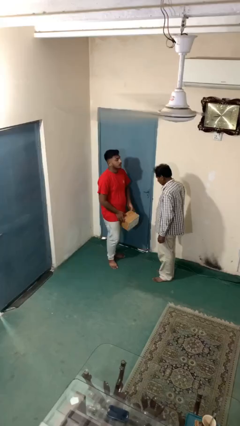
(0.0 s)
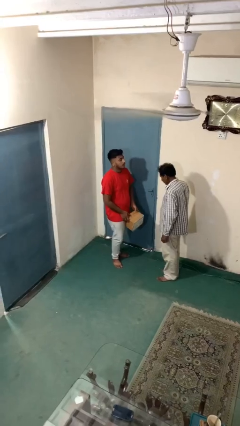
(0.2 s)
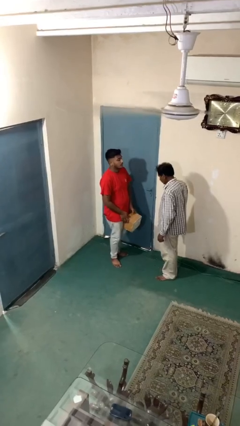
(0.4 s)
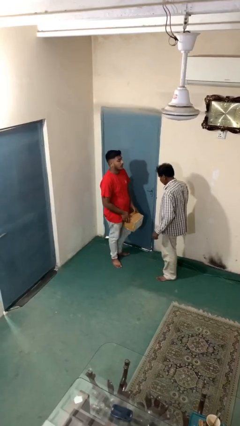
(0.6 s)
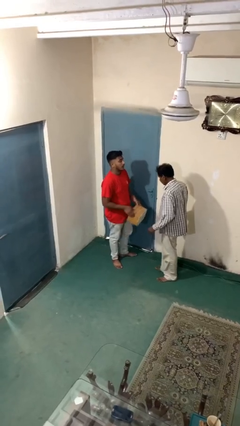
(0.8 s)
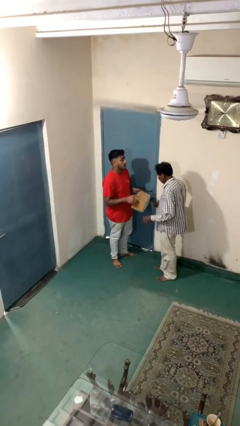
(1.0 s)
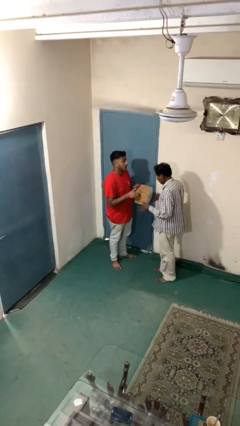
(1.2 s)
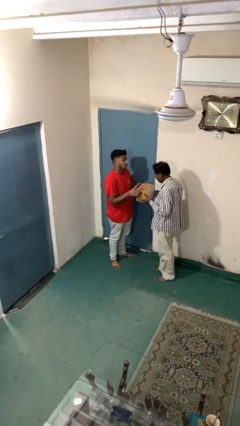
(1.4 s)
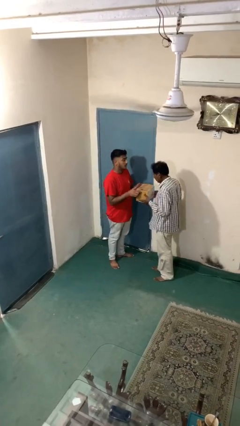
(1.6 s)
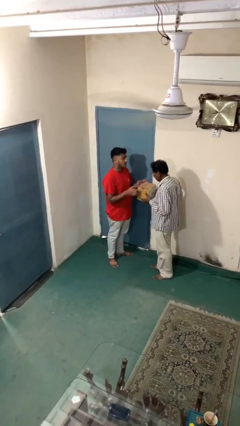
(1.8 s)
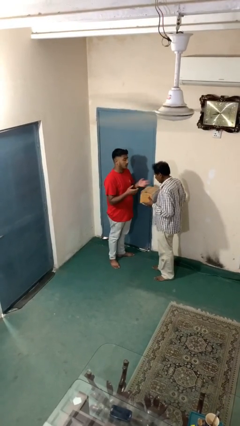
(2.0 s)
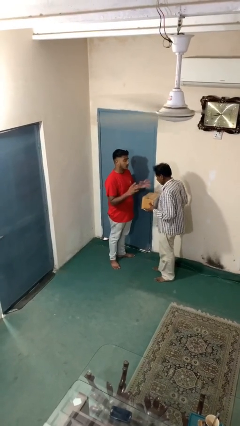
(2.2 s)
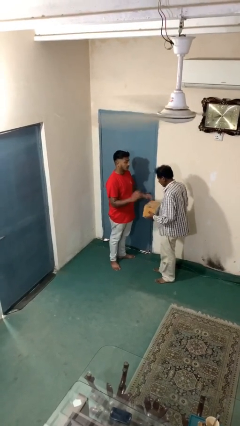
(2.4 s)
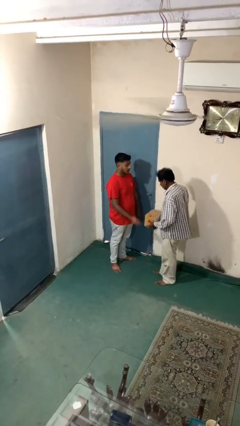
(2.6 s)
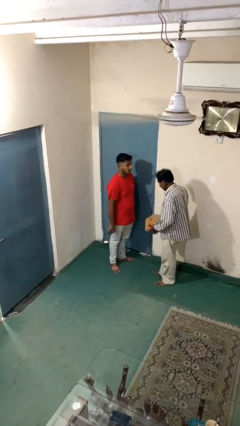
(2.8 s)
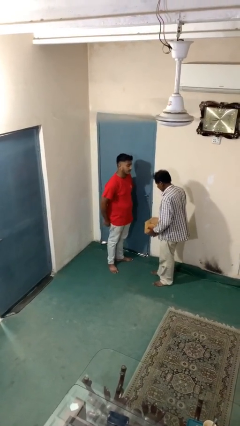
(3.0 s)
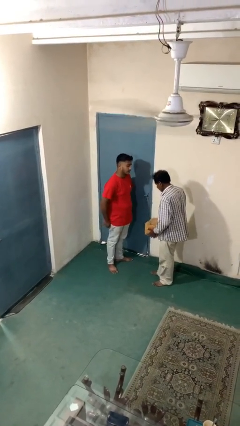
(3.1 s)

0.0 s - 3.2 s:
person transfers object to person

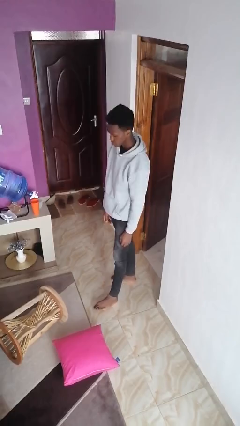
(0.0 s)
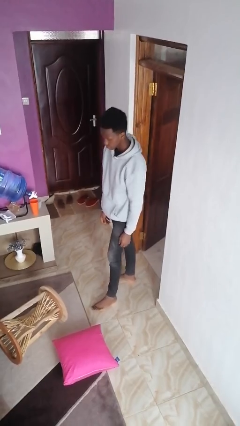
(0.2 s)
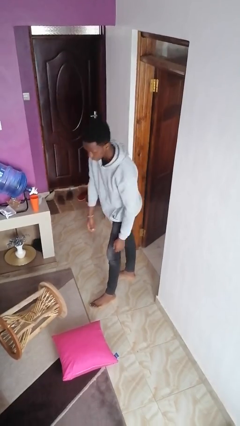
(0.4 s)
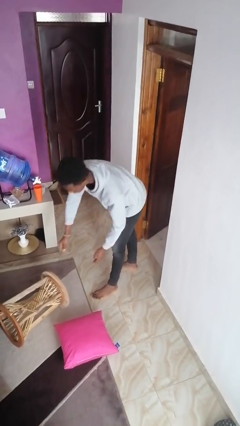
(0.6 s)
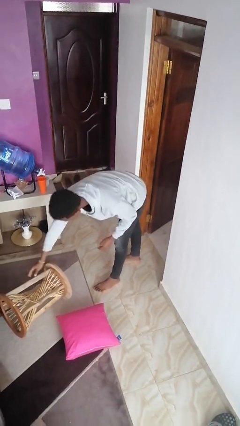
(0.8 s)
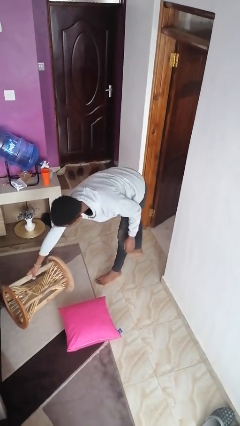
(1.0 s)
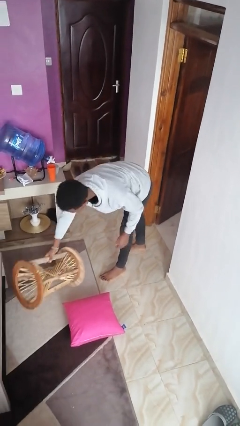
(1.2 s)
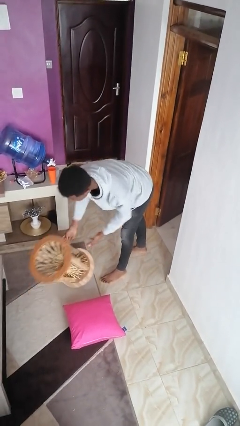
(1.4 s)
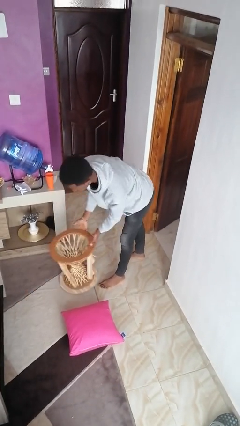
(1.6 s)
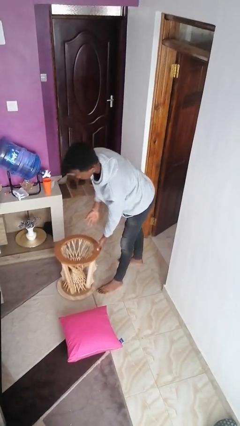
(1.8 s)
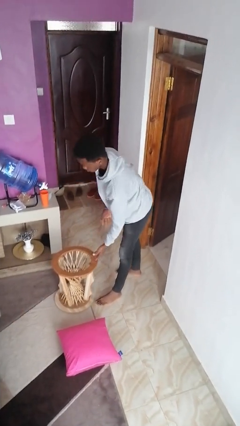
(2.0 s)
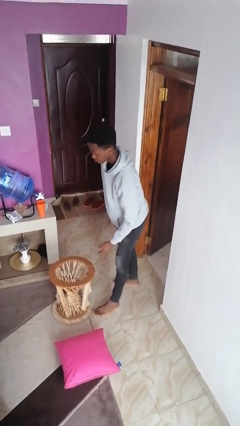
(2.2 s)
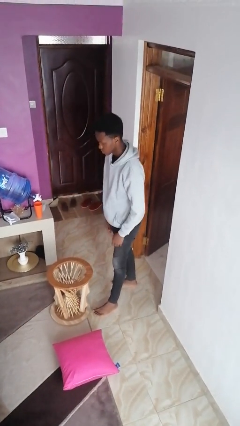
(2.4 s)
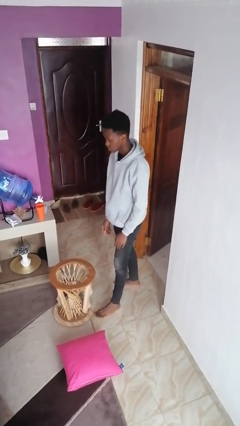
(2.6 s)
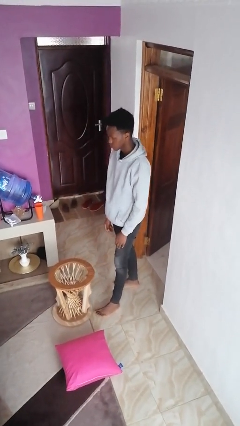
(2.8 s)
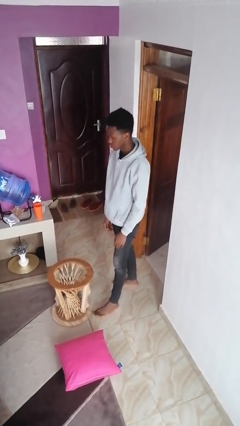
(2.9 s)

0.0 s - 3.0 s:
person sets upright furniture

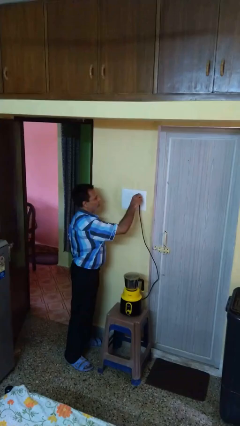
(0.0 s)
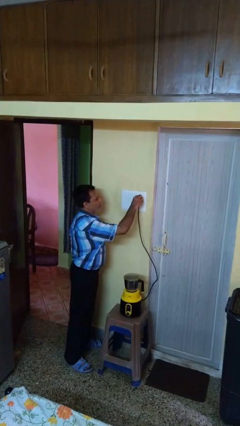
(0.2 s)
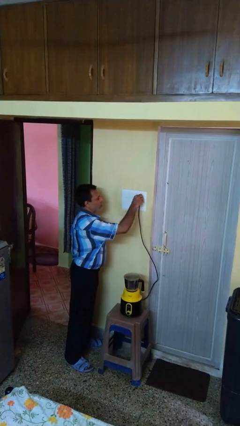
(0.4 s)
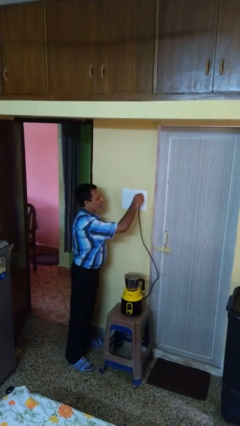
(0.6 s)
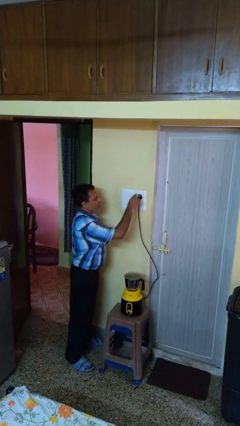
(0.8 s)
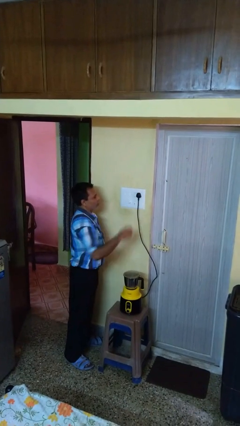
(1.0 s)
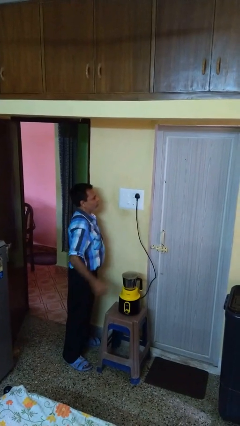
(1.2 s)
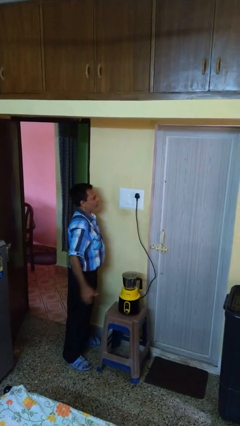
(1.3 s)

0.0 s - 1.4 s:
person plugs into electrical socket

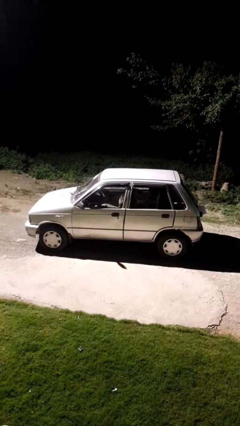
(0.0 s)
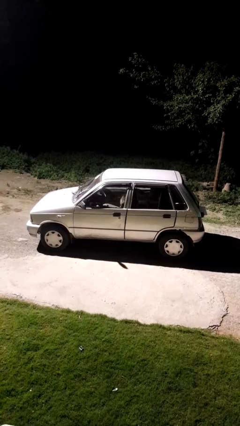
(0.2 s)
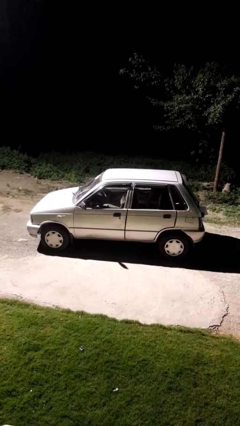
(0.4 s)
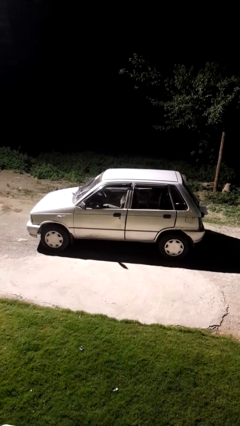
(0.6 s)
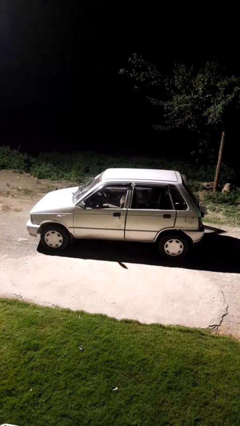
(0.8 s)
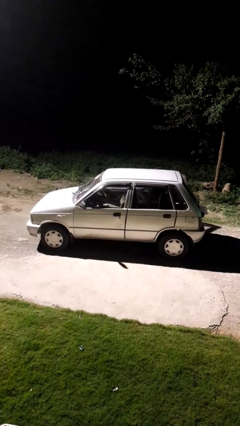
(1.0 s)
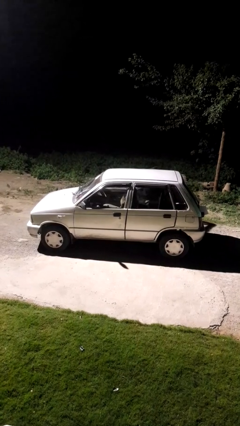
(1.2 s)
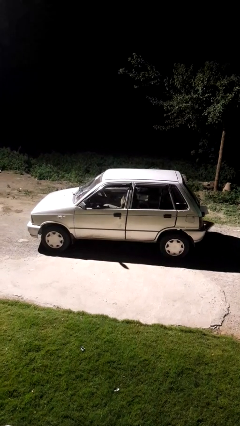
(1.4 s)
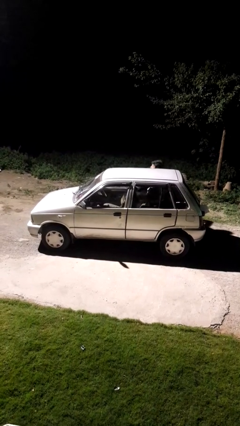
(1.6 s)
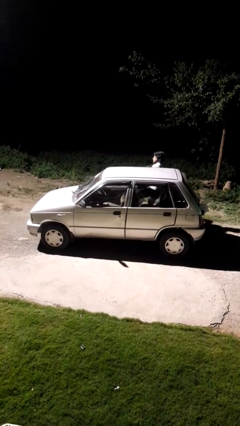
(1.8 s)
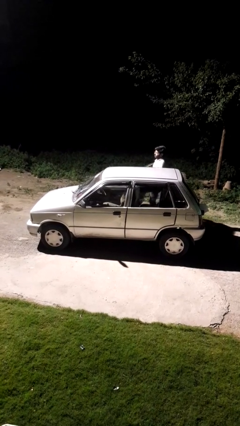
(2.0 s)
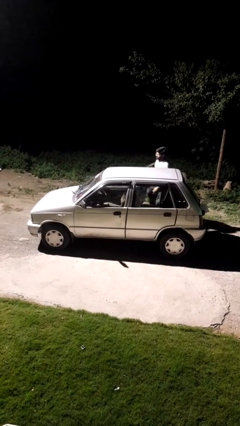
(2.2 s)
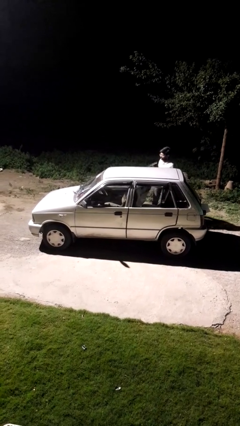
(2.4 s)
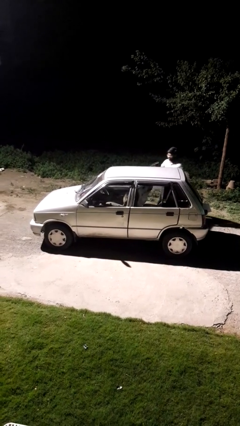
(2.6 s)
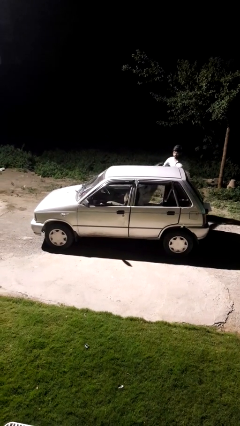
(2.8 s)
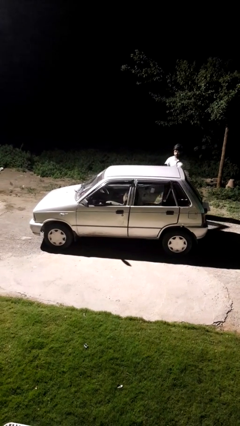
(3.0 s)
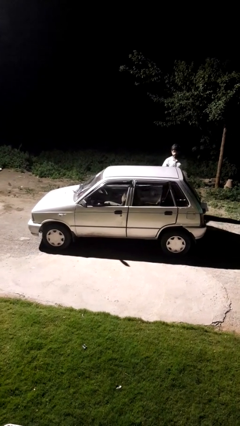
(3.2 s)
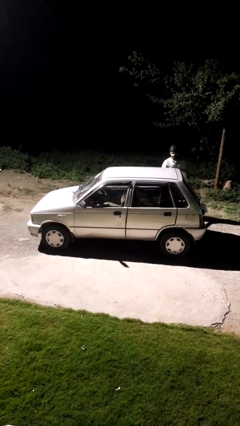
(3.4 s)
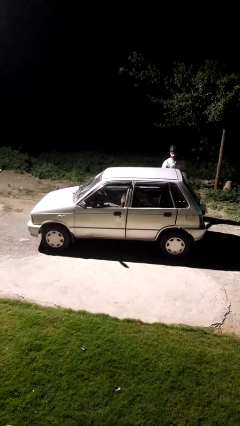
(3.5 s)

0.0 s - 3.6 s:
car drops off person

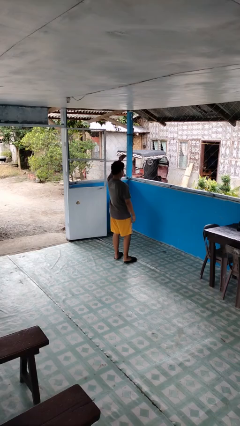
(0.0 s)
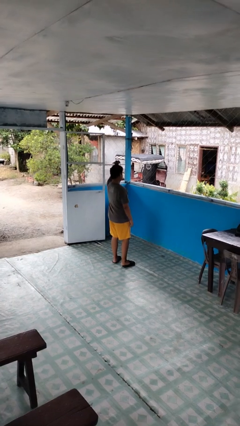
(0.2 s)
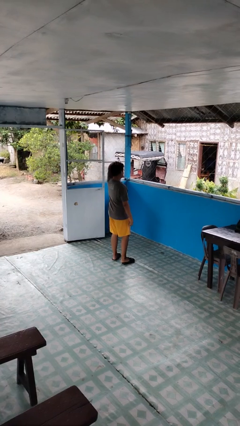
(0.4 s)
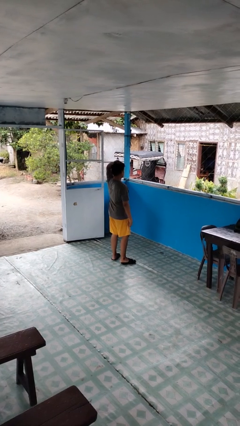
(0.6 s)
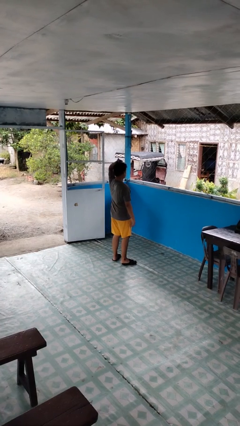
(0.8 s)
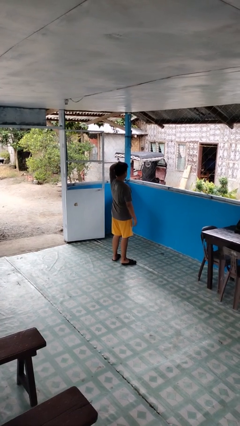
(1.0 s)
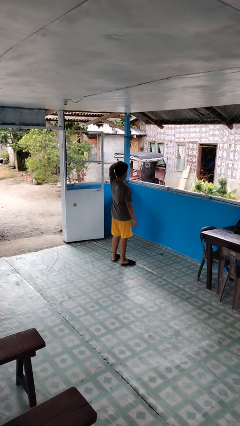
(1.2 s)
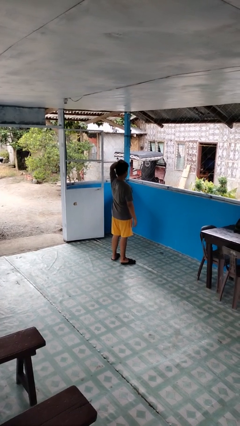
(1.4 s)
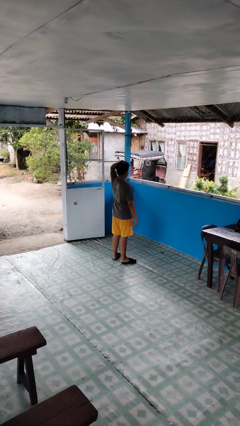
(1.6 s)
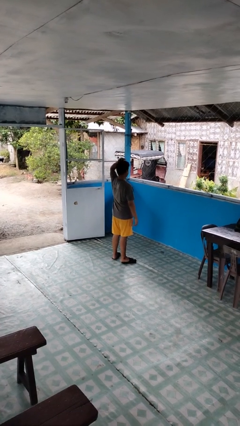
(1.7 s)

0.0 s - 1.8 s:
person pats head

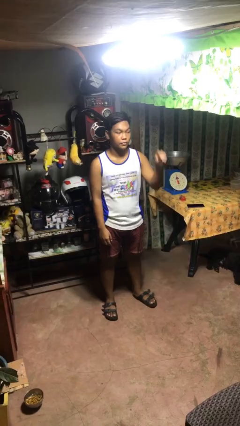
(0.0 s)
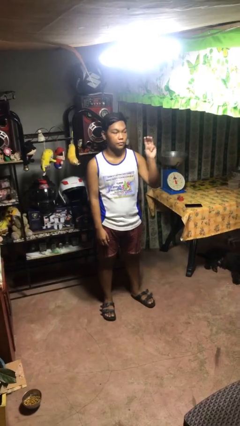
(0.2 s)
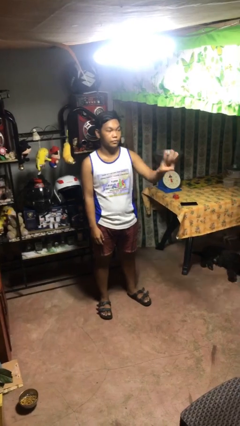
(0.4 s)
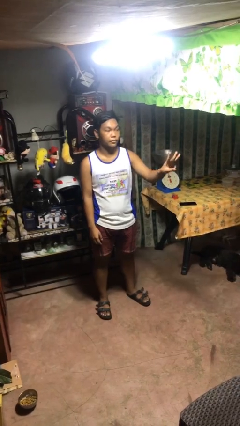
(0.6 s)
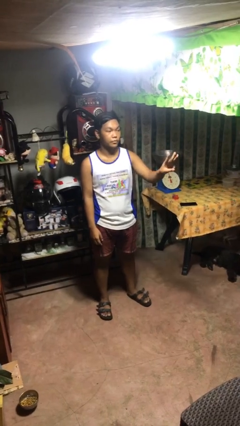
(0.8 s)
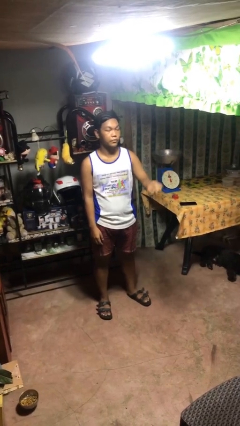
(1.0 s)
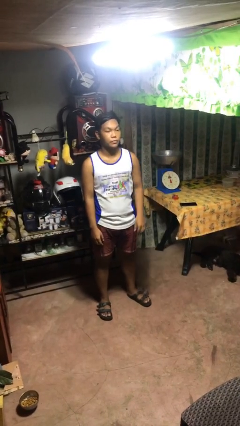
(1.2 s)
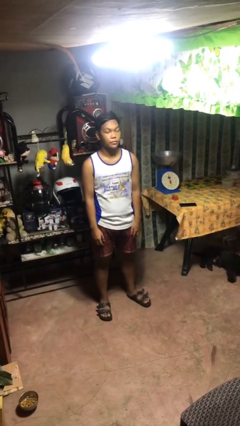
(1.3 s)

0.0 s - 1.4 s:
person gestures number three

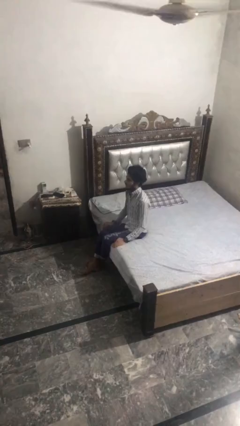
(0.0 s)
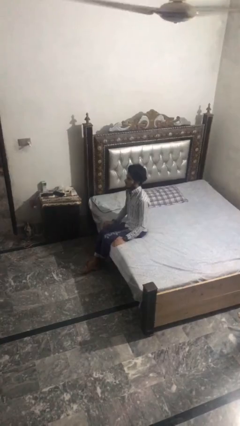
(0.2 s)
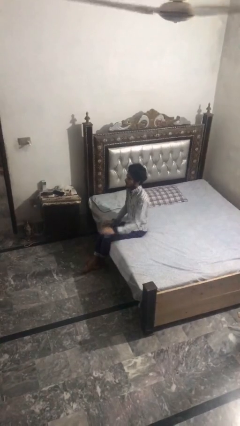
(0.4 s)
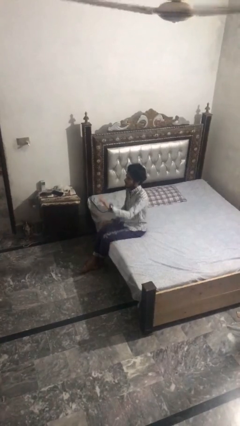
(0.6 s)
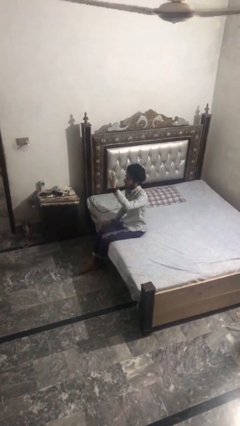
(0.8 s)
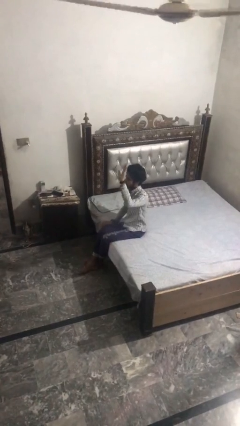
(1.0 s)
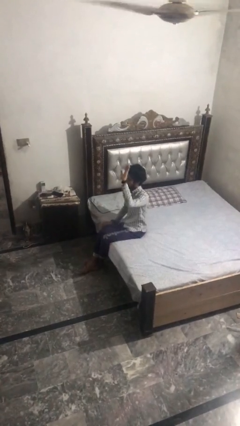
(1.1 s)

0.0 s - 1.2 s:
person gestures raise hand

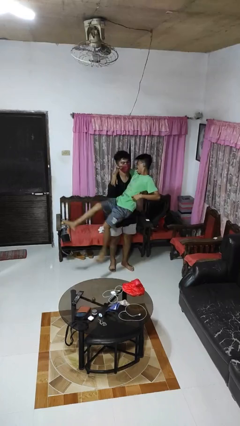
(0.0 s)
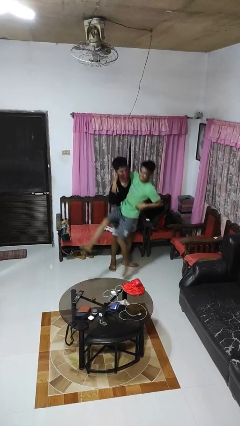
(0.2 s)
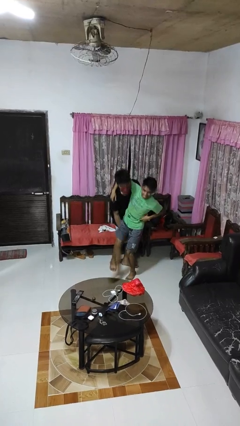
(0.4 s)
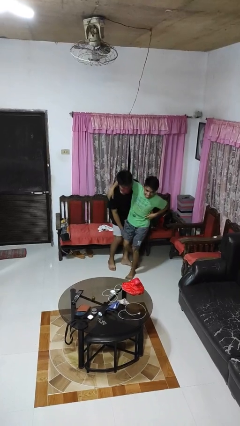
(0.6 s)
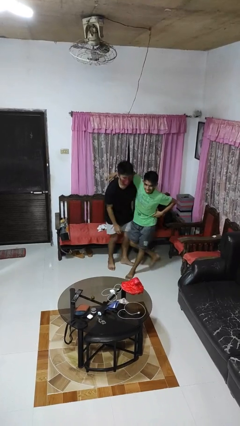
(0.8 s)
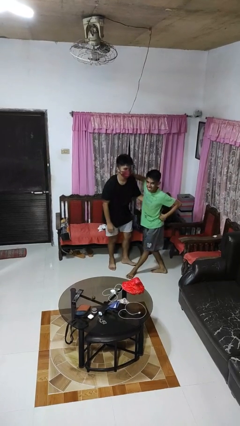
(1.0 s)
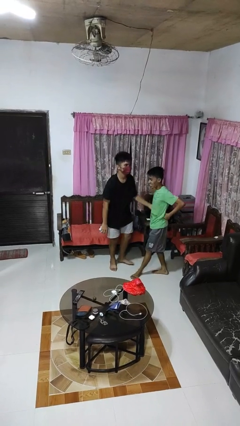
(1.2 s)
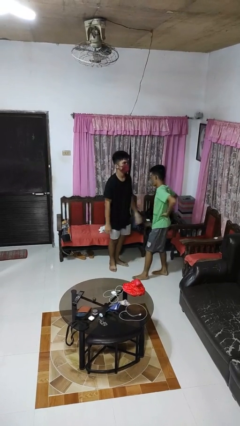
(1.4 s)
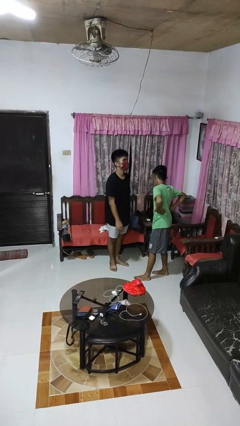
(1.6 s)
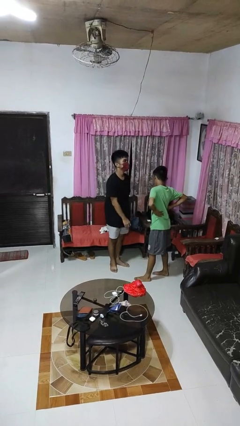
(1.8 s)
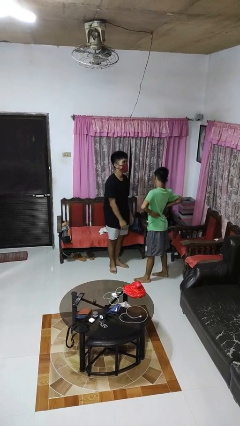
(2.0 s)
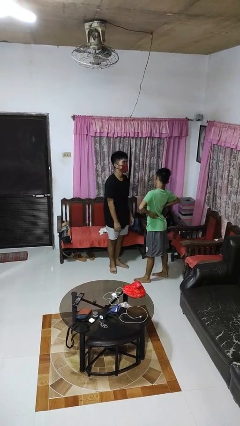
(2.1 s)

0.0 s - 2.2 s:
person puts down person
